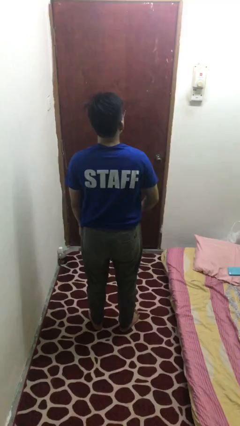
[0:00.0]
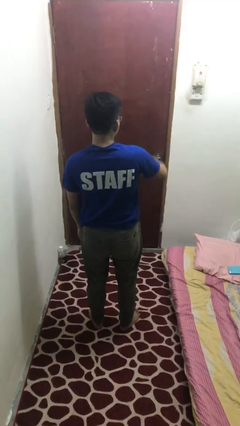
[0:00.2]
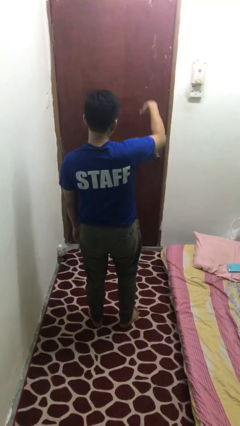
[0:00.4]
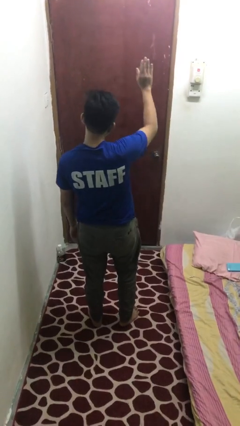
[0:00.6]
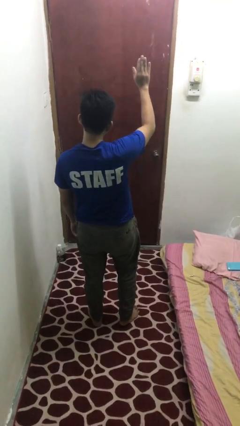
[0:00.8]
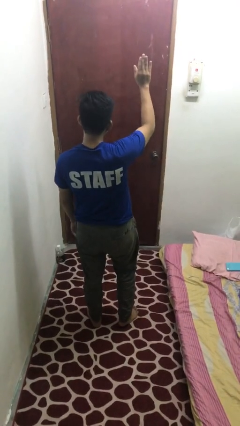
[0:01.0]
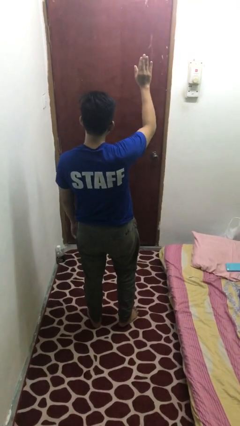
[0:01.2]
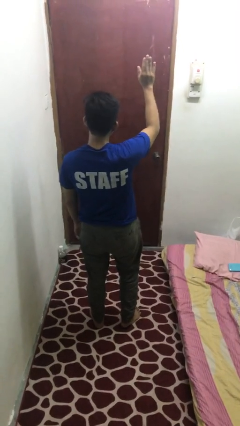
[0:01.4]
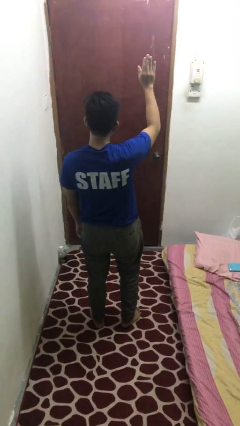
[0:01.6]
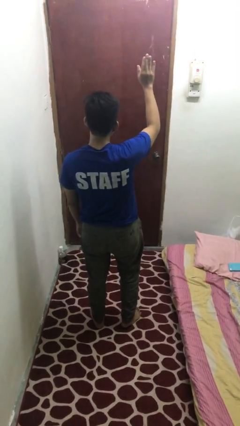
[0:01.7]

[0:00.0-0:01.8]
person gestures swipe up

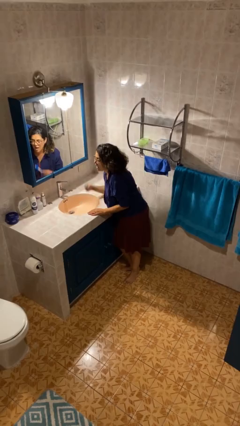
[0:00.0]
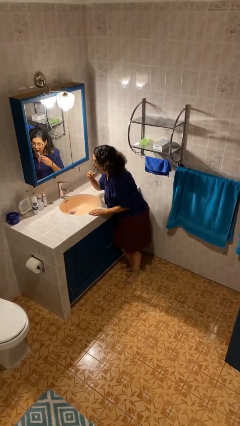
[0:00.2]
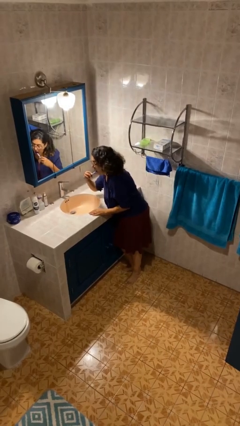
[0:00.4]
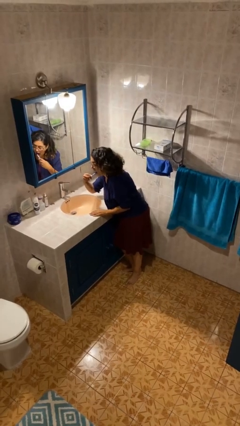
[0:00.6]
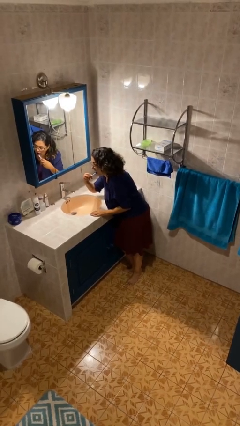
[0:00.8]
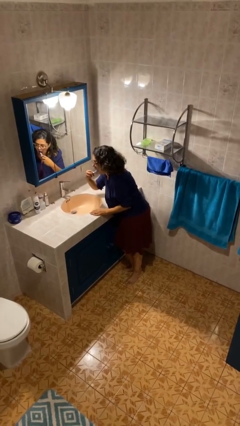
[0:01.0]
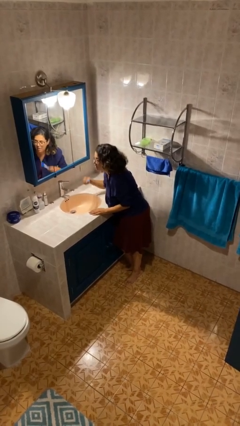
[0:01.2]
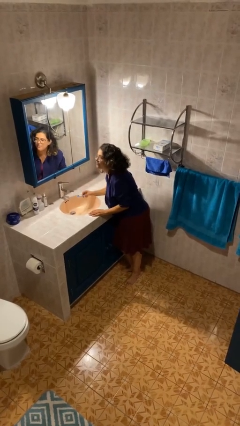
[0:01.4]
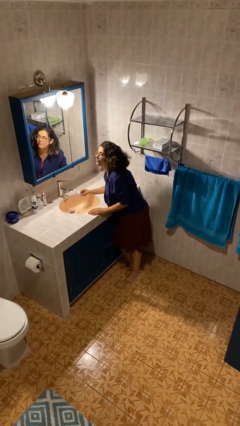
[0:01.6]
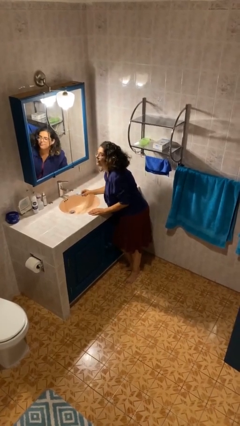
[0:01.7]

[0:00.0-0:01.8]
person brushes teeth

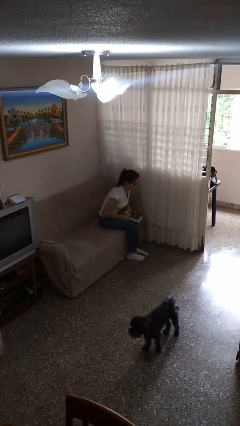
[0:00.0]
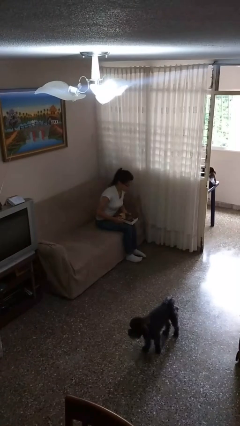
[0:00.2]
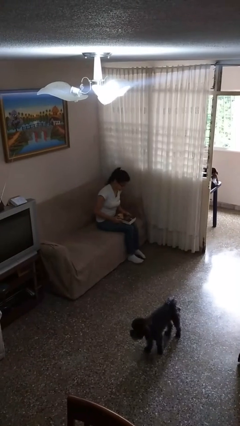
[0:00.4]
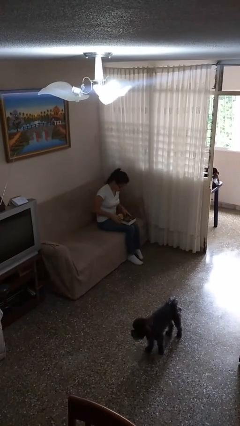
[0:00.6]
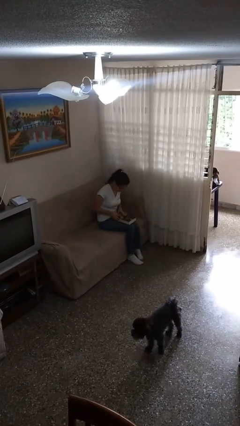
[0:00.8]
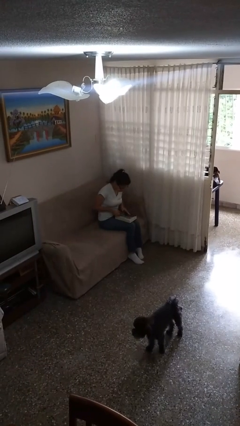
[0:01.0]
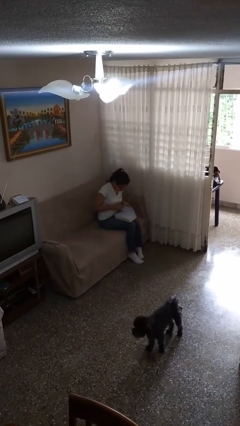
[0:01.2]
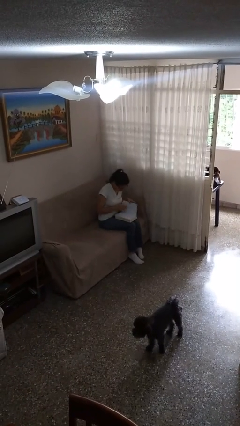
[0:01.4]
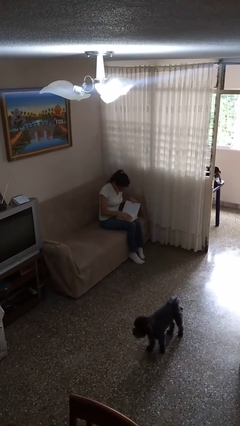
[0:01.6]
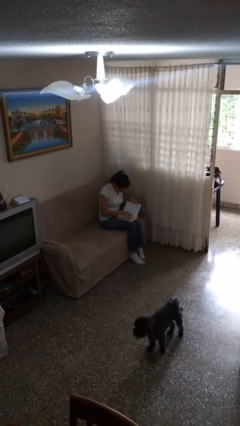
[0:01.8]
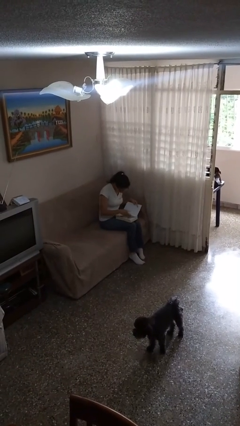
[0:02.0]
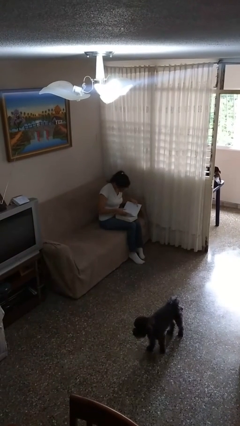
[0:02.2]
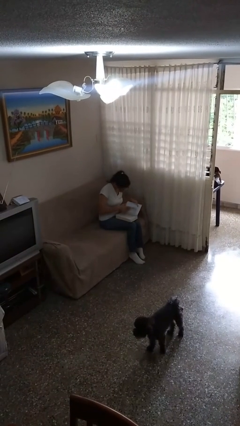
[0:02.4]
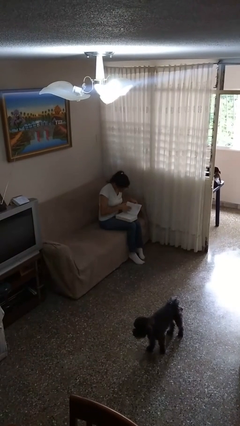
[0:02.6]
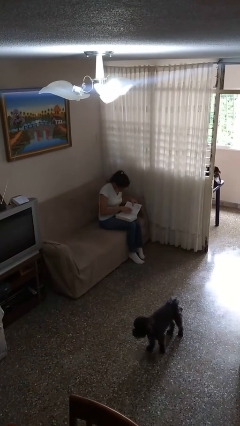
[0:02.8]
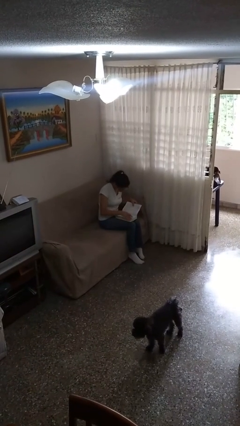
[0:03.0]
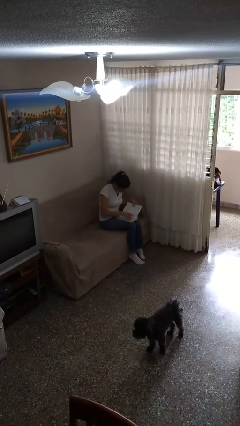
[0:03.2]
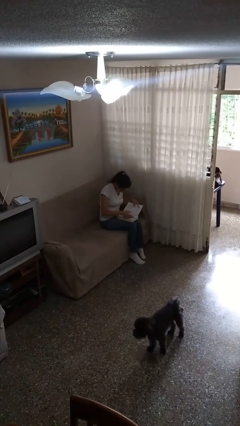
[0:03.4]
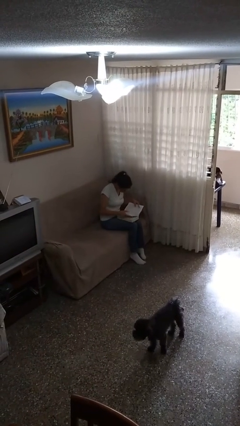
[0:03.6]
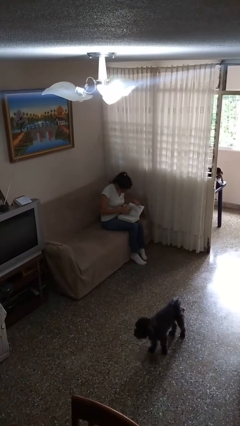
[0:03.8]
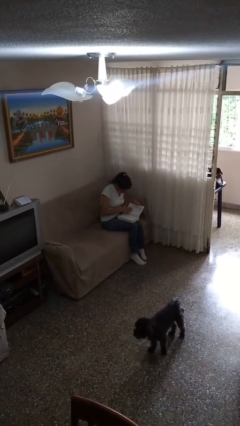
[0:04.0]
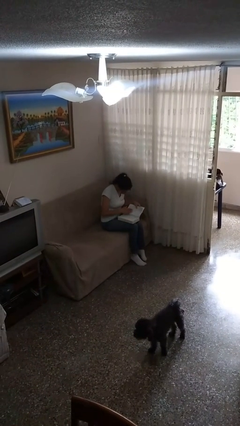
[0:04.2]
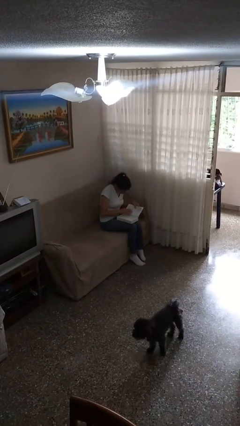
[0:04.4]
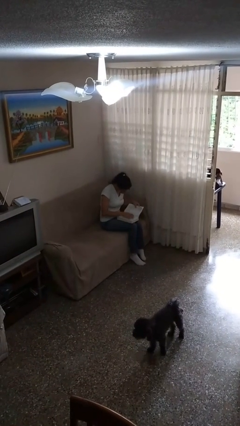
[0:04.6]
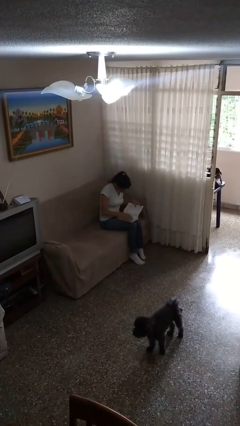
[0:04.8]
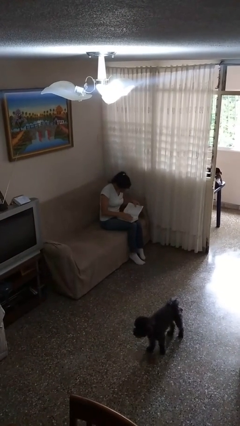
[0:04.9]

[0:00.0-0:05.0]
person reads book

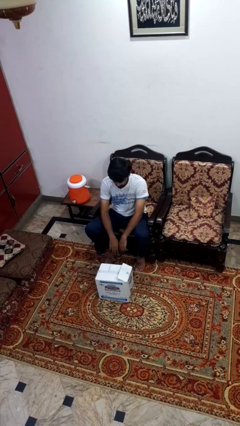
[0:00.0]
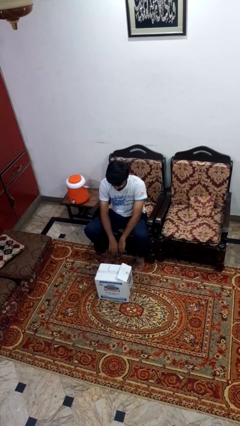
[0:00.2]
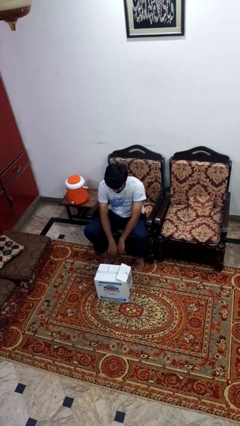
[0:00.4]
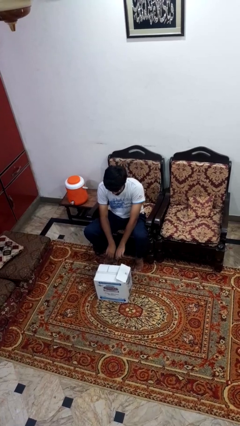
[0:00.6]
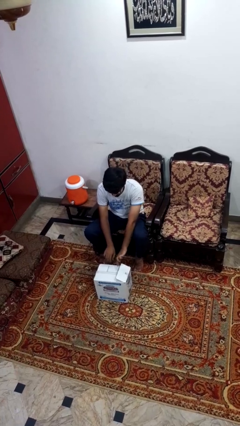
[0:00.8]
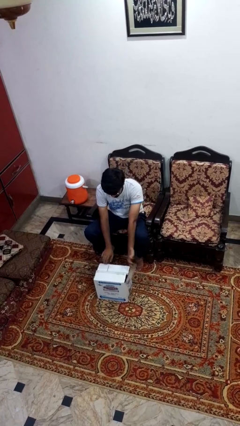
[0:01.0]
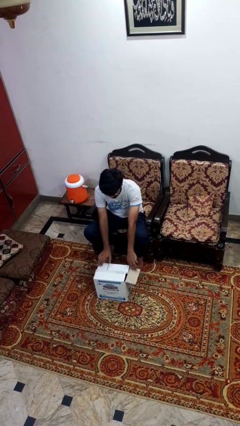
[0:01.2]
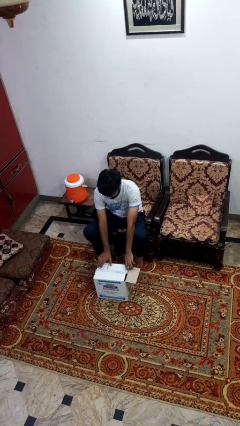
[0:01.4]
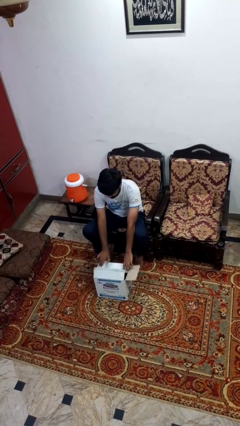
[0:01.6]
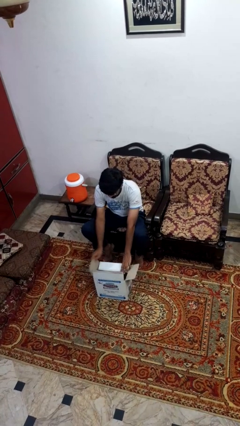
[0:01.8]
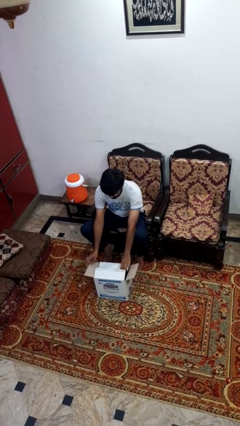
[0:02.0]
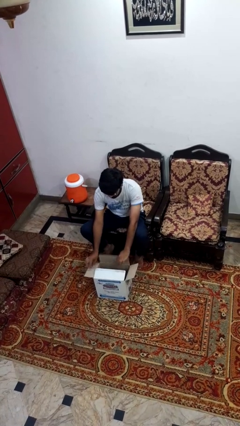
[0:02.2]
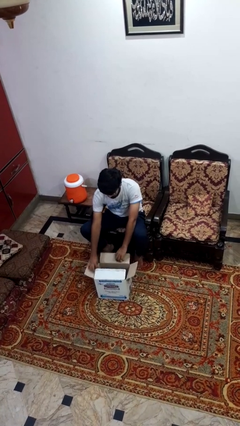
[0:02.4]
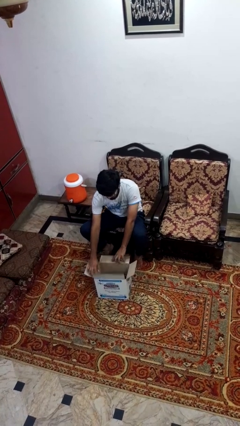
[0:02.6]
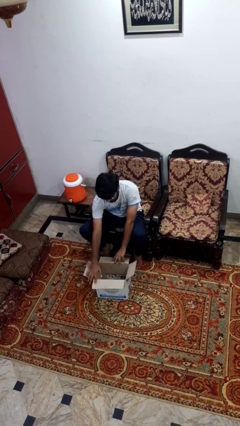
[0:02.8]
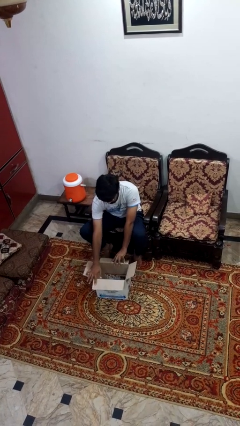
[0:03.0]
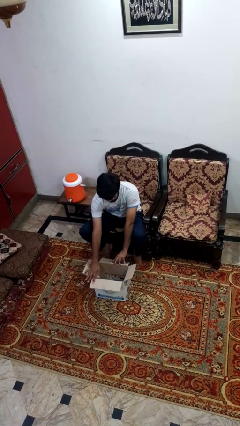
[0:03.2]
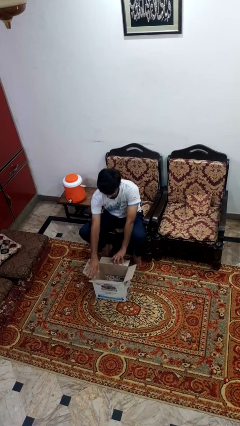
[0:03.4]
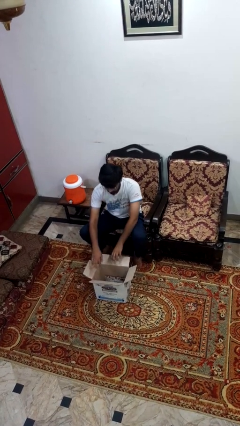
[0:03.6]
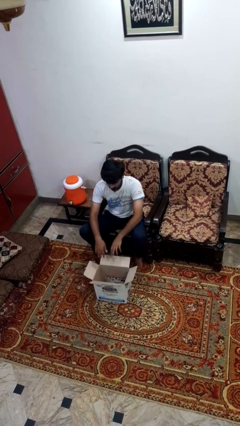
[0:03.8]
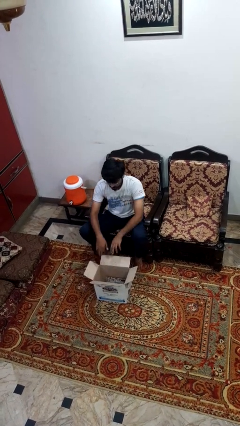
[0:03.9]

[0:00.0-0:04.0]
person opens box

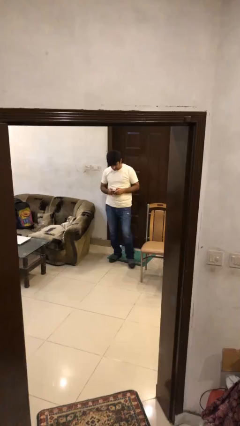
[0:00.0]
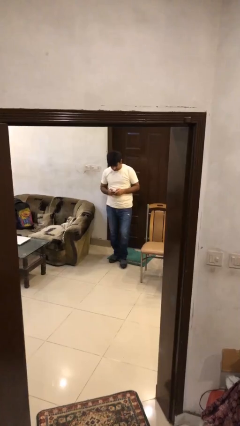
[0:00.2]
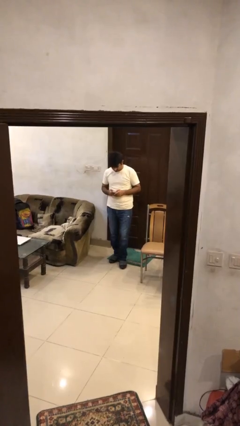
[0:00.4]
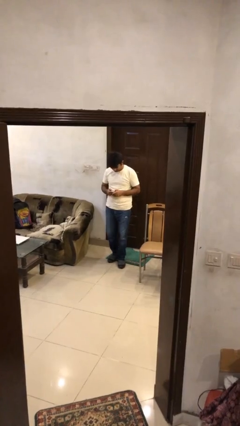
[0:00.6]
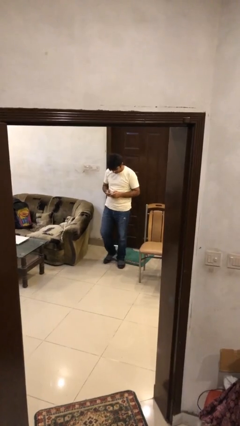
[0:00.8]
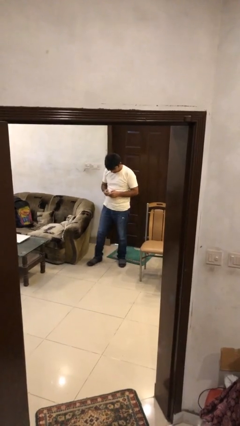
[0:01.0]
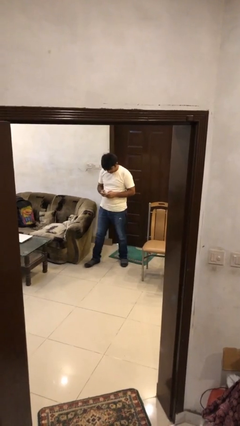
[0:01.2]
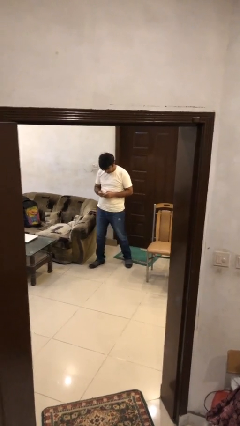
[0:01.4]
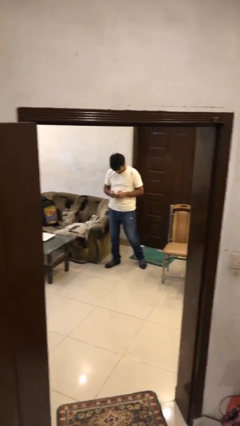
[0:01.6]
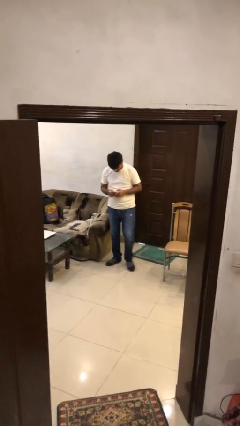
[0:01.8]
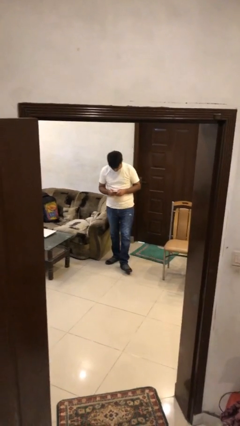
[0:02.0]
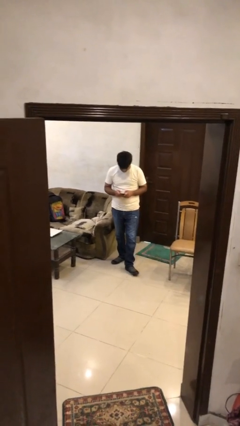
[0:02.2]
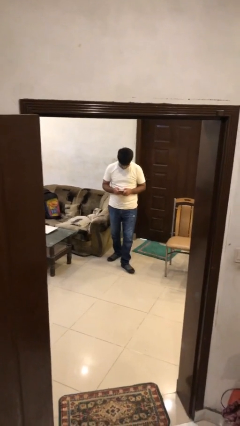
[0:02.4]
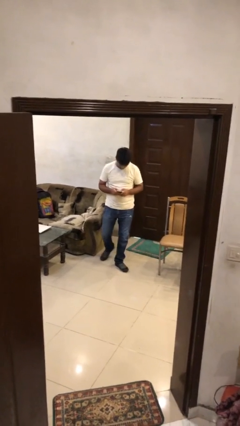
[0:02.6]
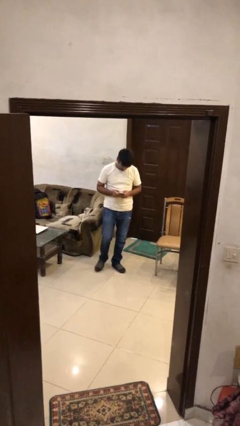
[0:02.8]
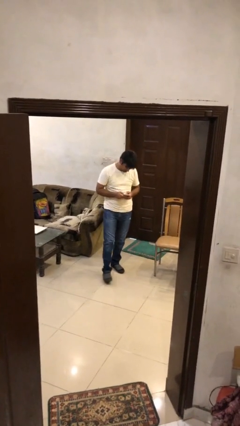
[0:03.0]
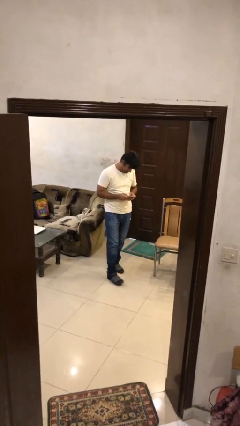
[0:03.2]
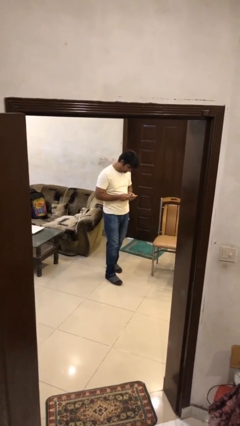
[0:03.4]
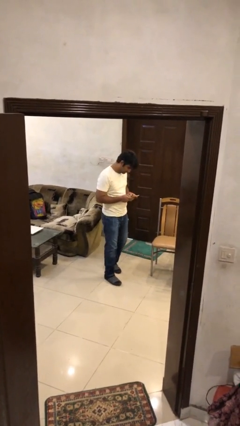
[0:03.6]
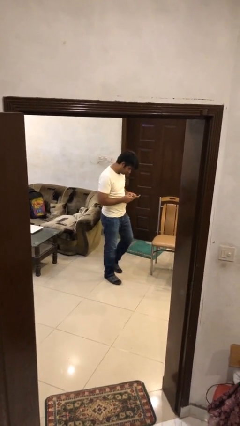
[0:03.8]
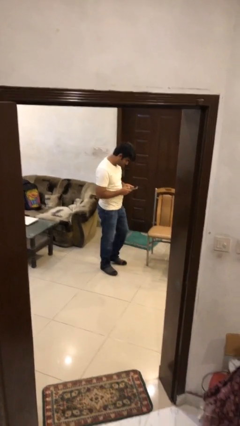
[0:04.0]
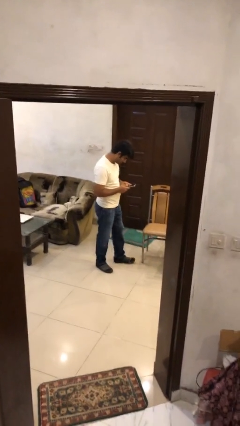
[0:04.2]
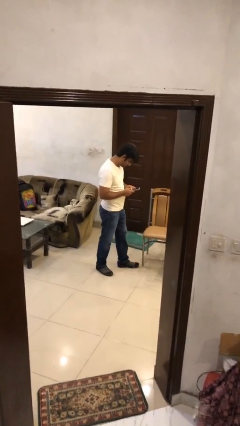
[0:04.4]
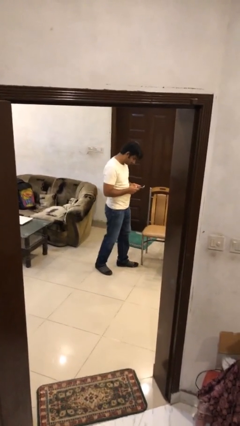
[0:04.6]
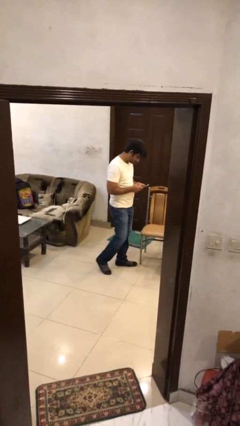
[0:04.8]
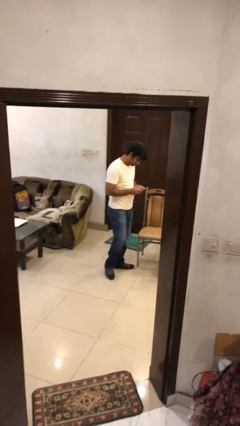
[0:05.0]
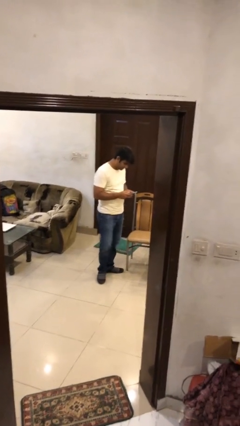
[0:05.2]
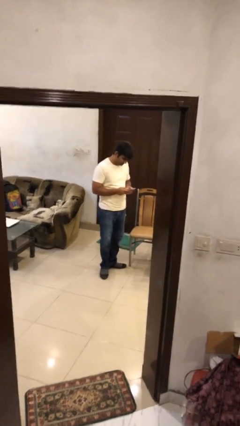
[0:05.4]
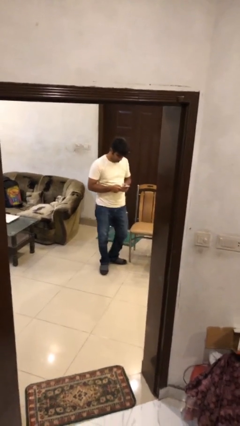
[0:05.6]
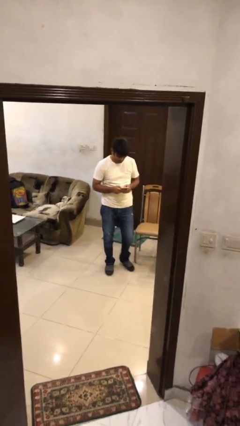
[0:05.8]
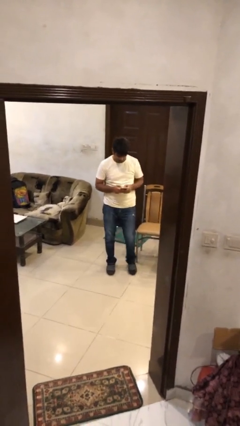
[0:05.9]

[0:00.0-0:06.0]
person texts on phone
